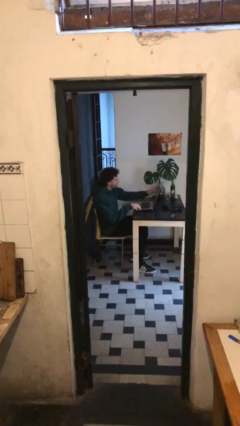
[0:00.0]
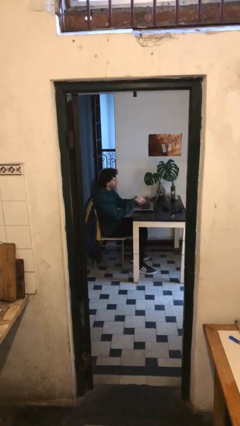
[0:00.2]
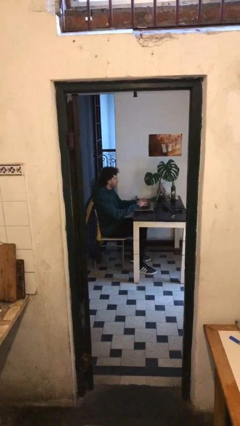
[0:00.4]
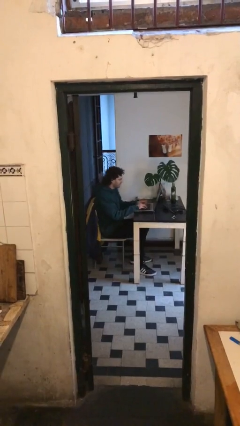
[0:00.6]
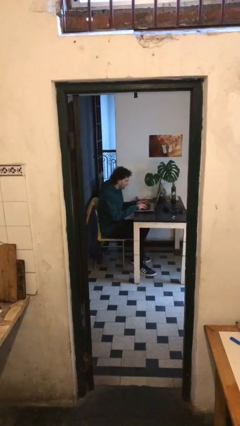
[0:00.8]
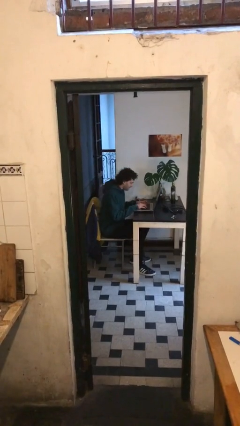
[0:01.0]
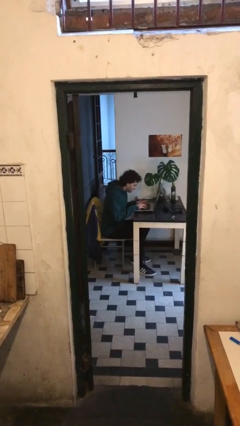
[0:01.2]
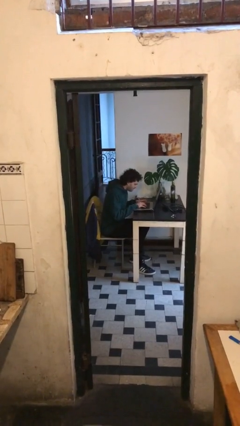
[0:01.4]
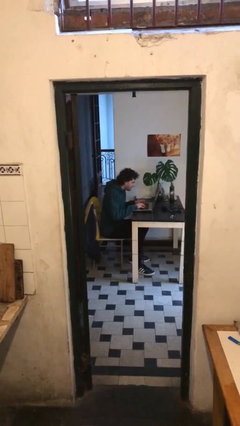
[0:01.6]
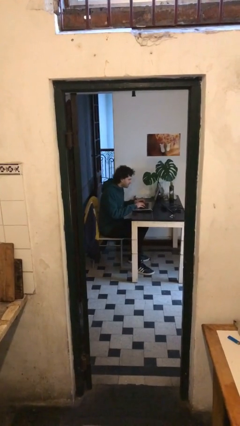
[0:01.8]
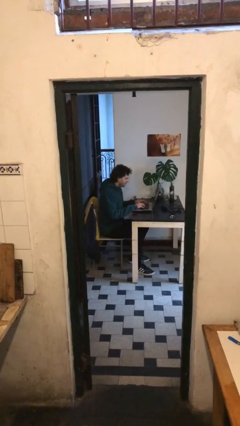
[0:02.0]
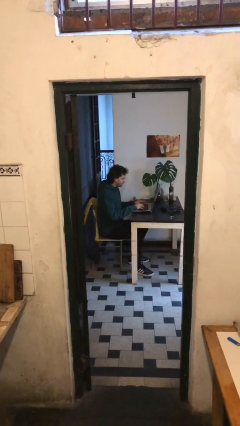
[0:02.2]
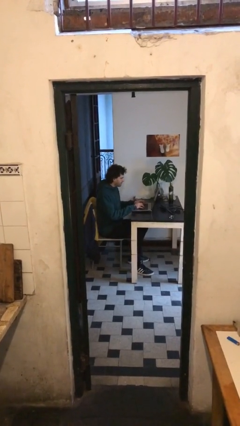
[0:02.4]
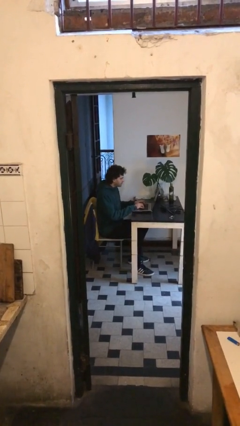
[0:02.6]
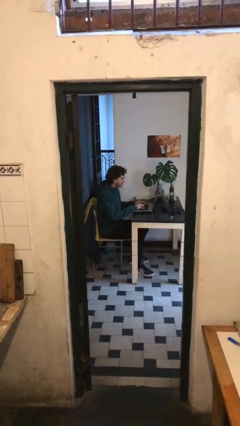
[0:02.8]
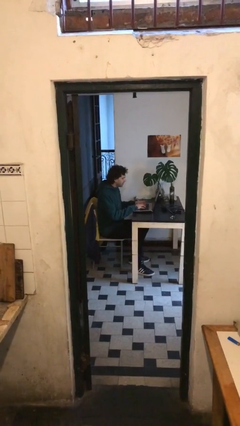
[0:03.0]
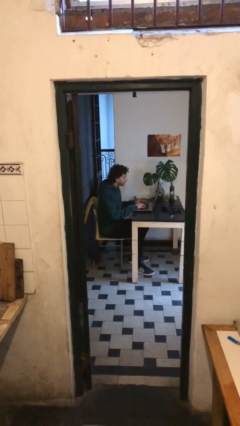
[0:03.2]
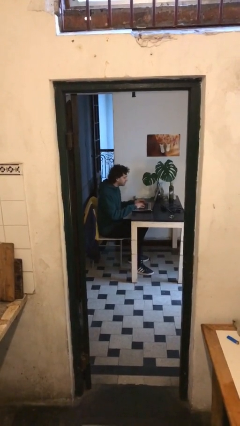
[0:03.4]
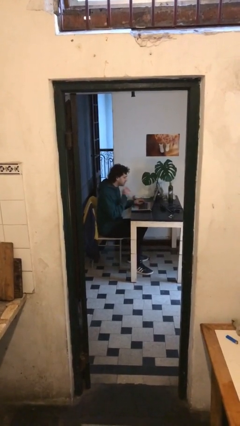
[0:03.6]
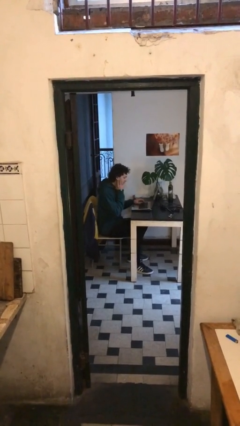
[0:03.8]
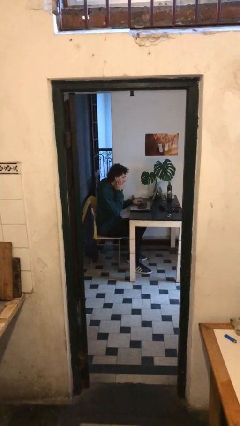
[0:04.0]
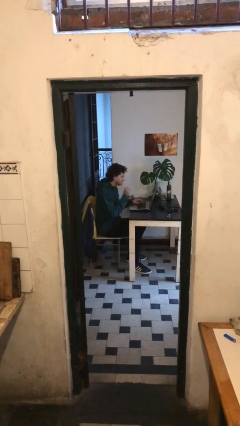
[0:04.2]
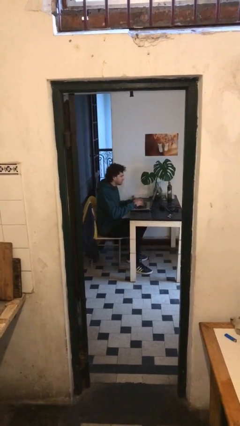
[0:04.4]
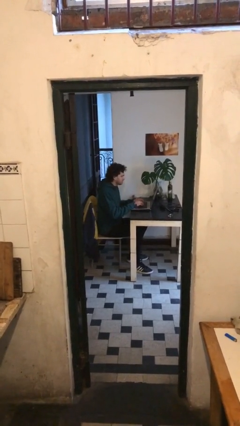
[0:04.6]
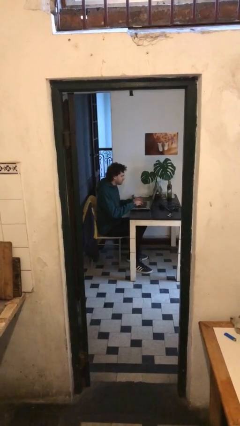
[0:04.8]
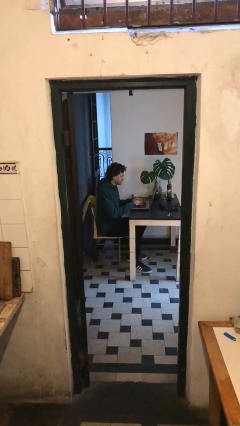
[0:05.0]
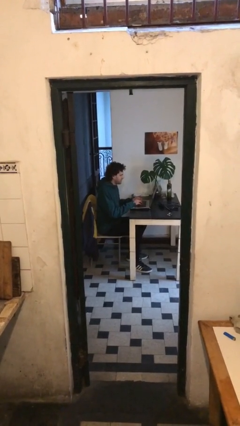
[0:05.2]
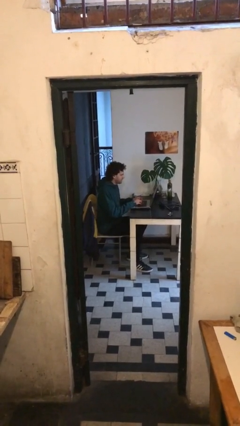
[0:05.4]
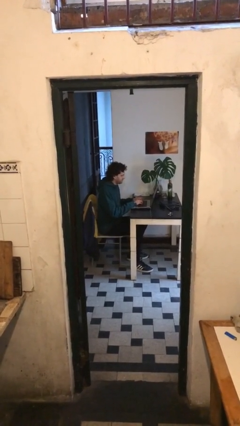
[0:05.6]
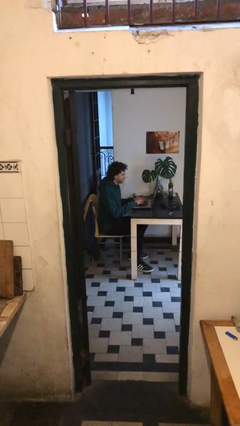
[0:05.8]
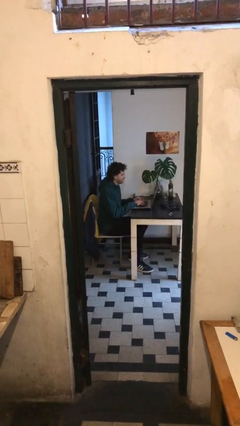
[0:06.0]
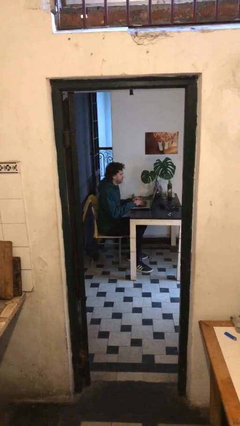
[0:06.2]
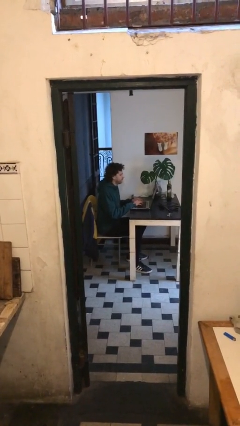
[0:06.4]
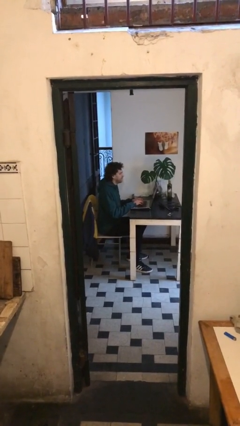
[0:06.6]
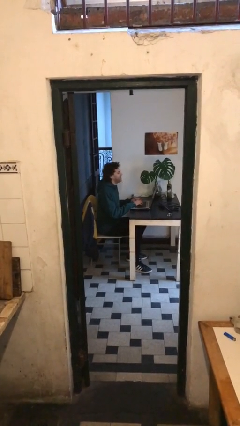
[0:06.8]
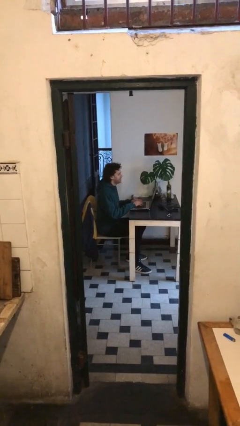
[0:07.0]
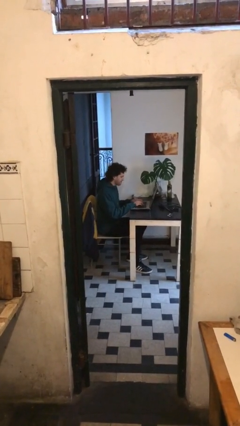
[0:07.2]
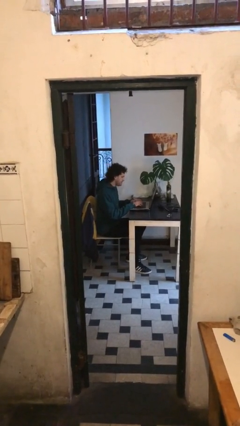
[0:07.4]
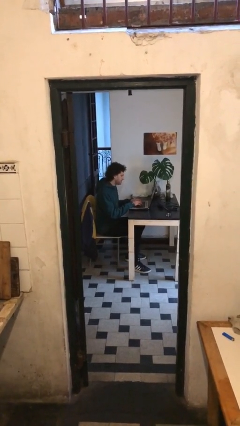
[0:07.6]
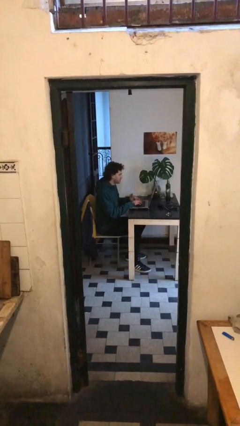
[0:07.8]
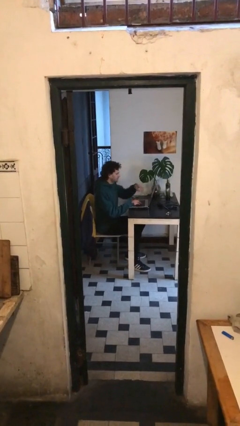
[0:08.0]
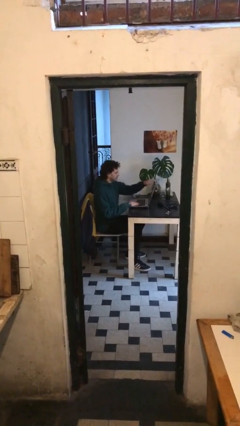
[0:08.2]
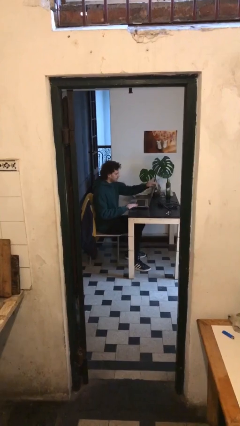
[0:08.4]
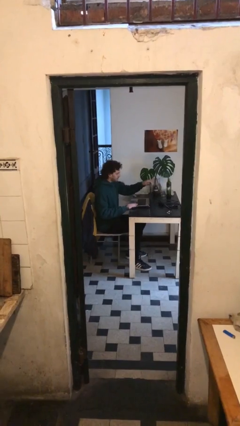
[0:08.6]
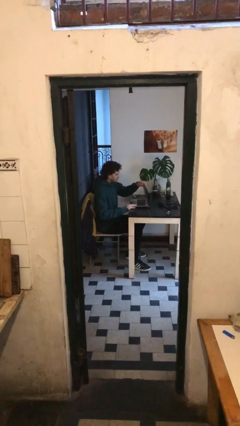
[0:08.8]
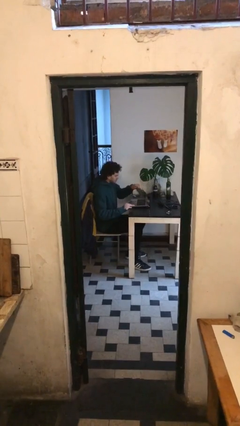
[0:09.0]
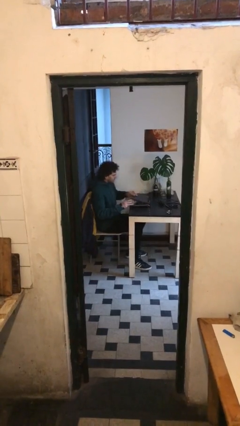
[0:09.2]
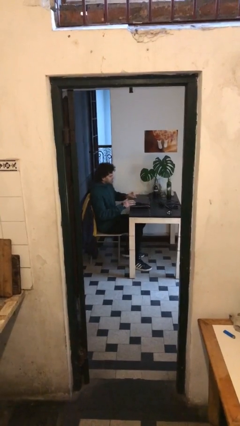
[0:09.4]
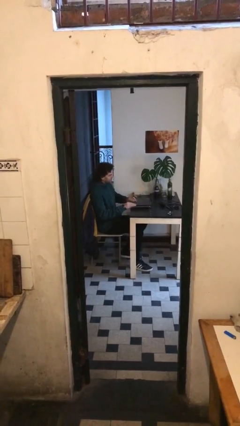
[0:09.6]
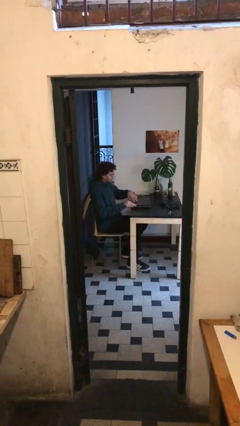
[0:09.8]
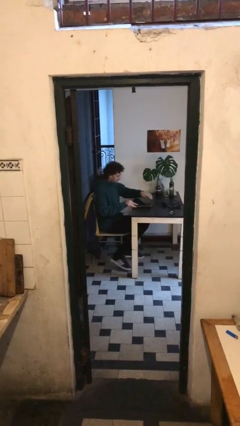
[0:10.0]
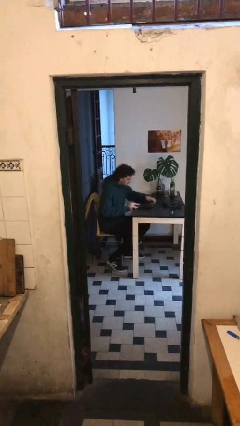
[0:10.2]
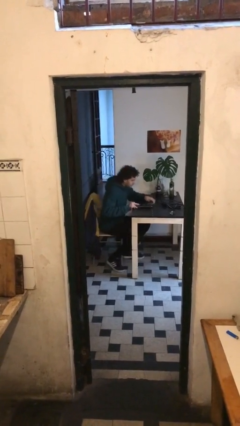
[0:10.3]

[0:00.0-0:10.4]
person interacts with laptop

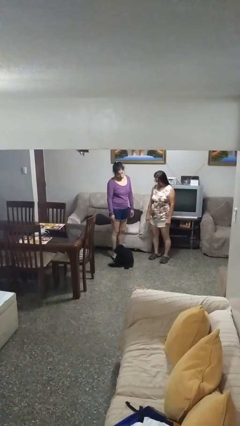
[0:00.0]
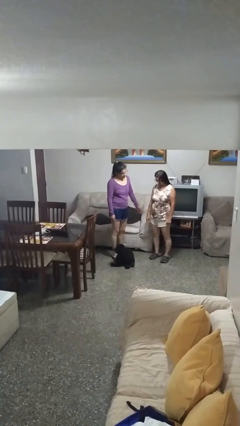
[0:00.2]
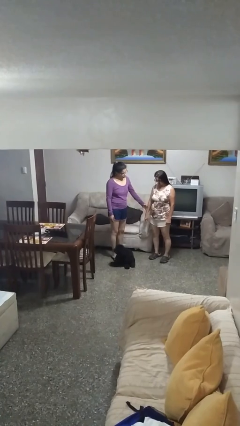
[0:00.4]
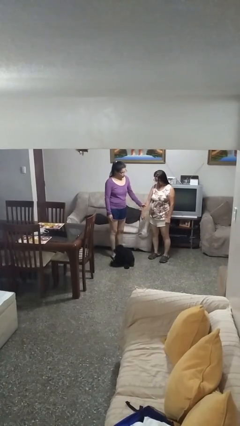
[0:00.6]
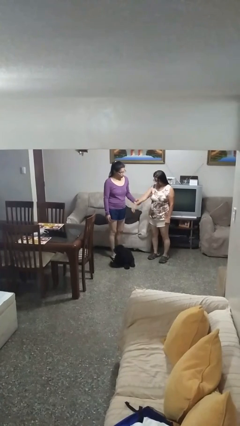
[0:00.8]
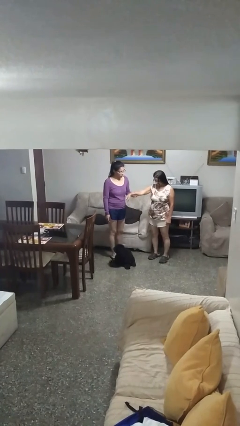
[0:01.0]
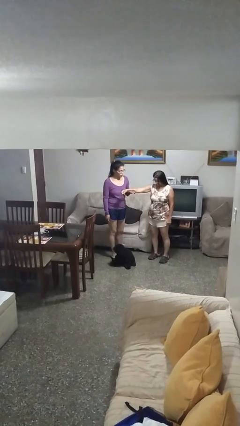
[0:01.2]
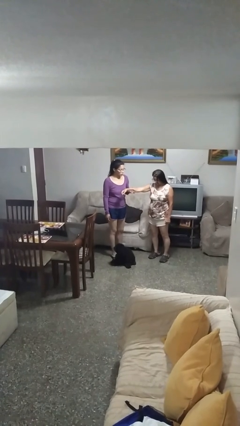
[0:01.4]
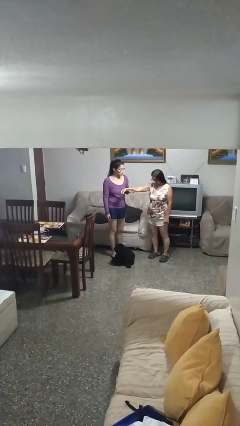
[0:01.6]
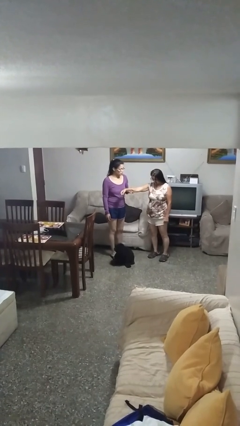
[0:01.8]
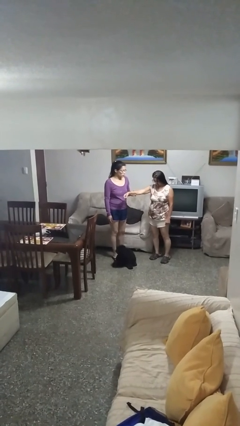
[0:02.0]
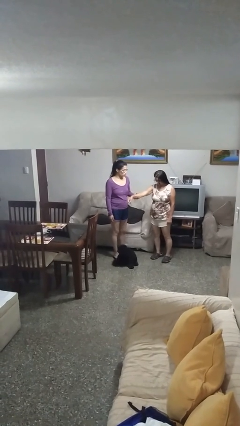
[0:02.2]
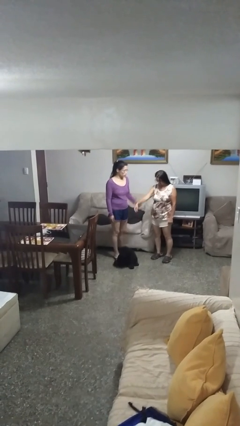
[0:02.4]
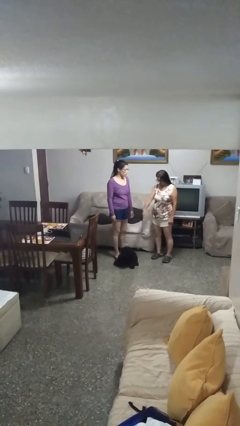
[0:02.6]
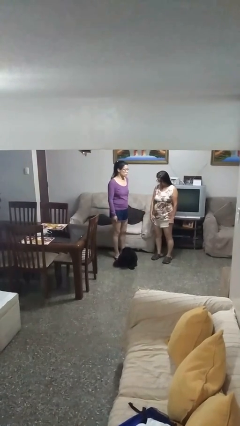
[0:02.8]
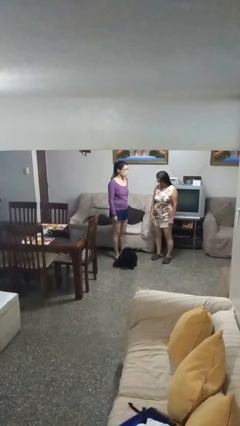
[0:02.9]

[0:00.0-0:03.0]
person grabs person by forearm

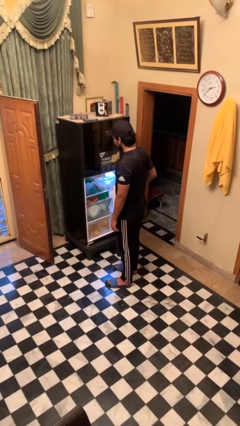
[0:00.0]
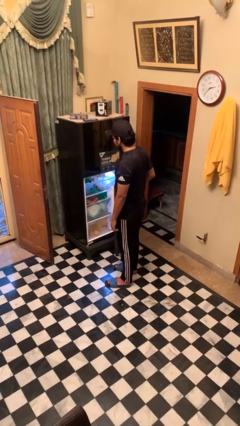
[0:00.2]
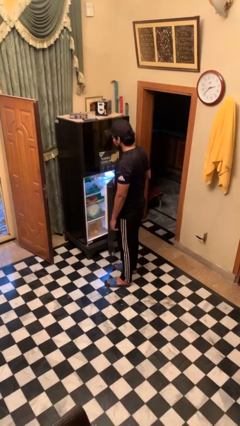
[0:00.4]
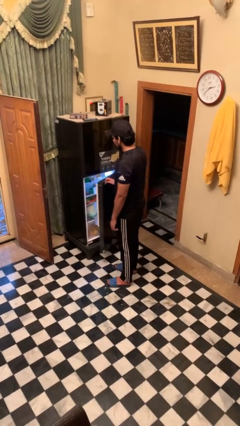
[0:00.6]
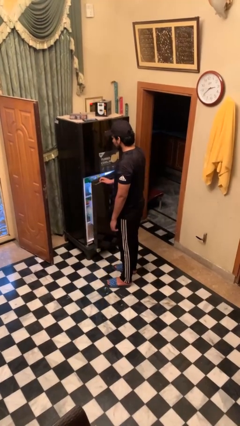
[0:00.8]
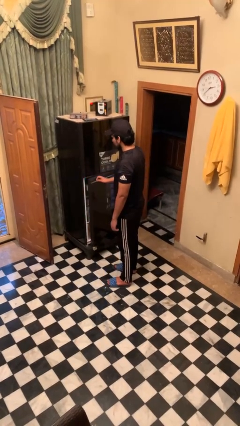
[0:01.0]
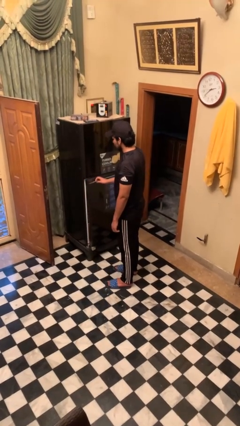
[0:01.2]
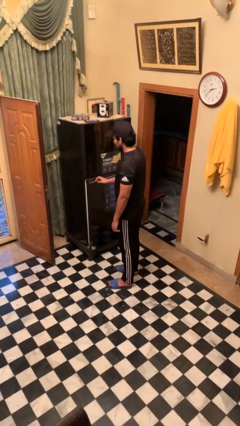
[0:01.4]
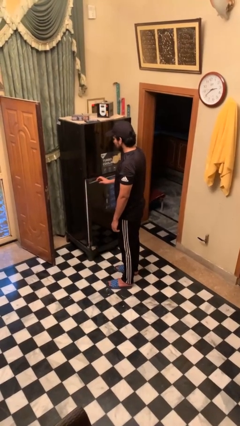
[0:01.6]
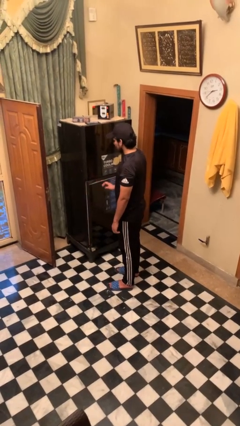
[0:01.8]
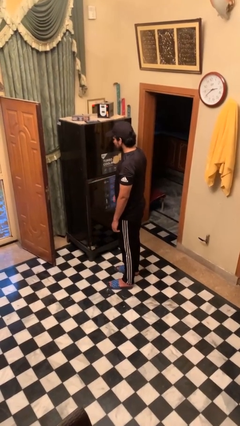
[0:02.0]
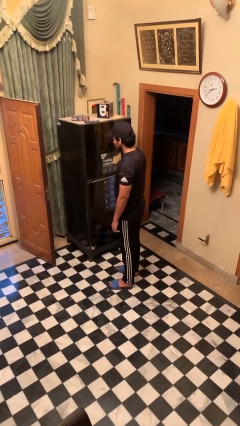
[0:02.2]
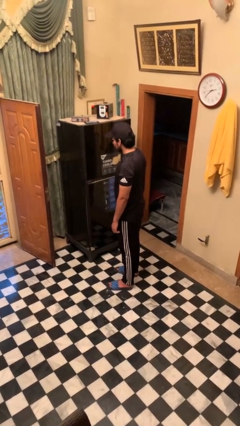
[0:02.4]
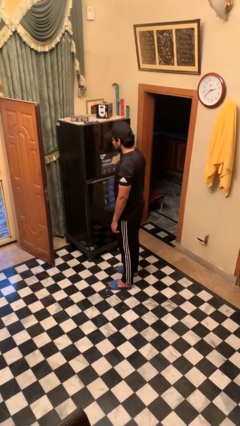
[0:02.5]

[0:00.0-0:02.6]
person closes refrigerator

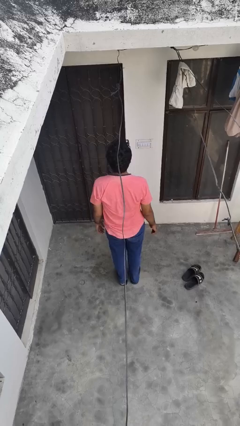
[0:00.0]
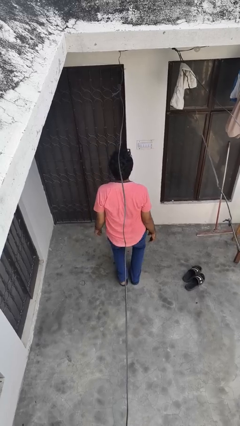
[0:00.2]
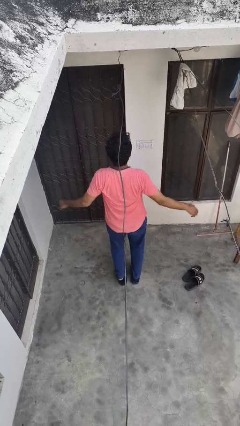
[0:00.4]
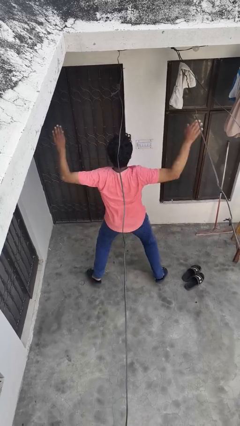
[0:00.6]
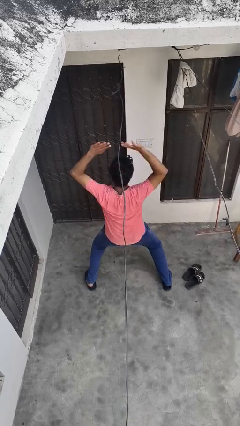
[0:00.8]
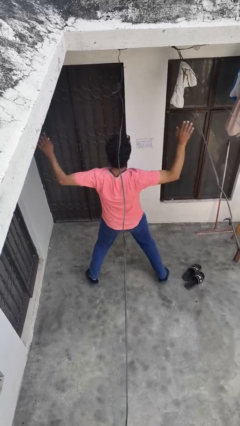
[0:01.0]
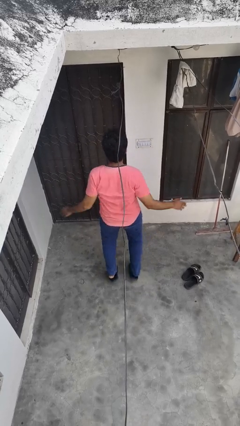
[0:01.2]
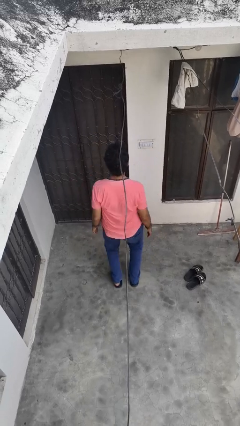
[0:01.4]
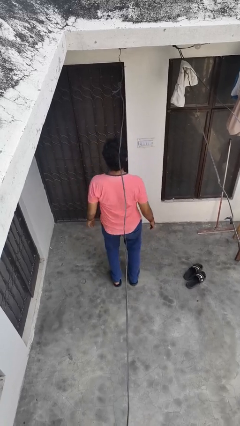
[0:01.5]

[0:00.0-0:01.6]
person exercises with jumping jacks

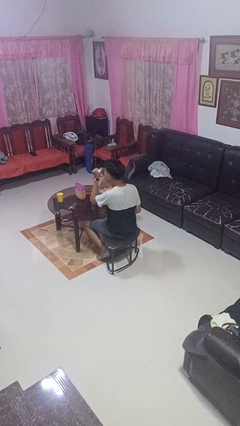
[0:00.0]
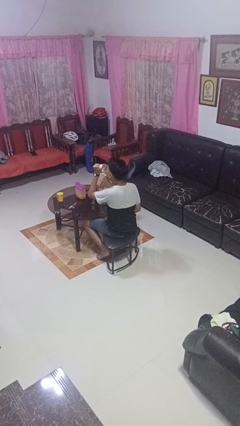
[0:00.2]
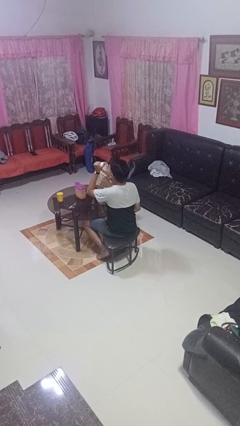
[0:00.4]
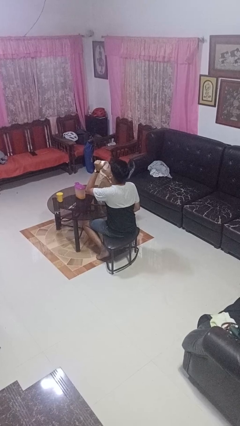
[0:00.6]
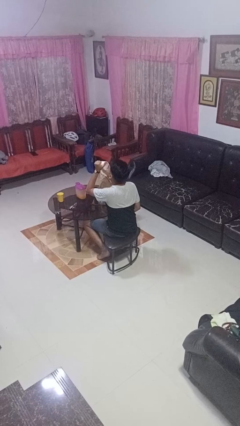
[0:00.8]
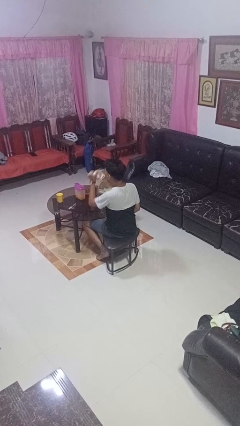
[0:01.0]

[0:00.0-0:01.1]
person drinks from mug
